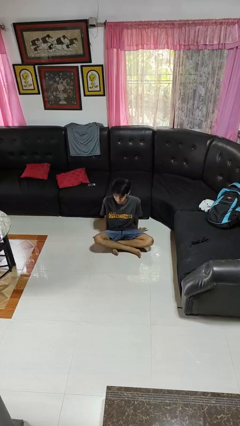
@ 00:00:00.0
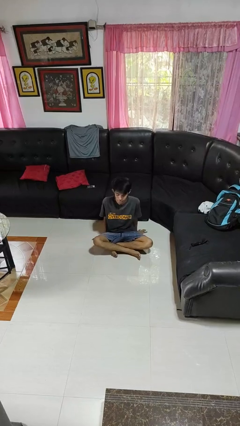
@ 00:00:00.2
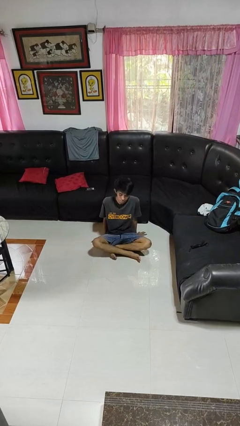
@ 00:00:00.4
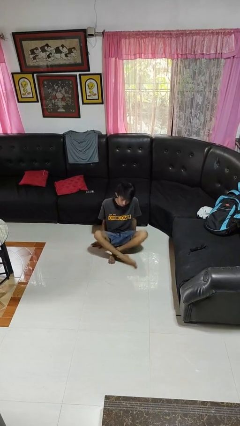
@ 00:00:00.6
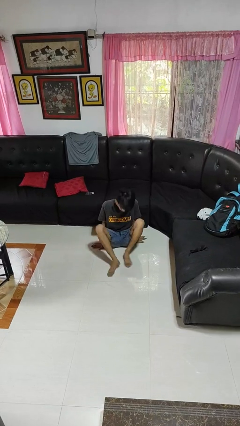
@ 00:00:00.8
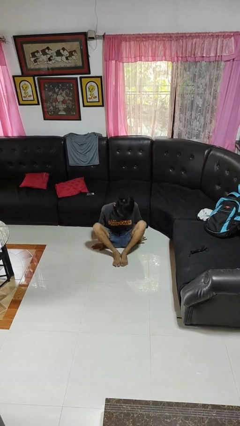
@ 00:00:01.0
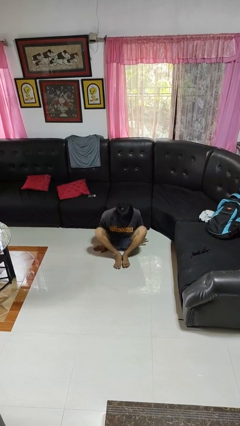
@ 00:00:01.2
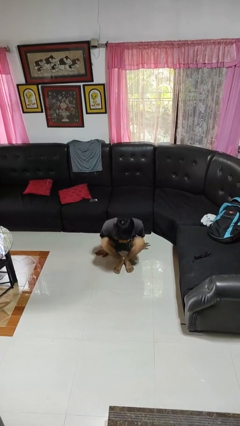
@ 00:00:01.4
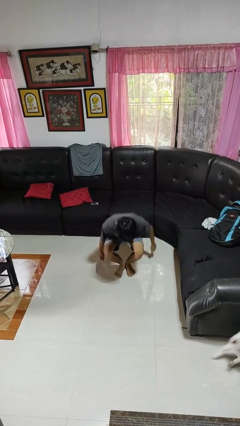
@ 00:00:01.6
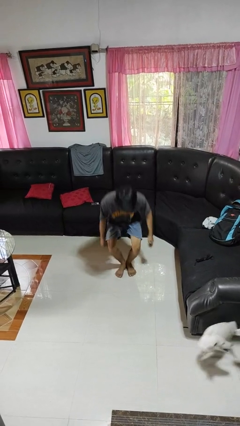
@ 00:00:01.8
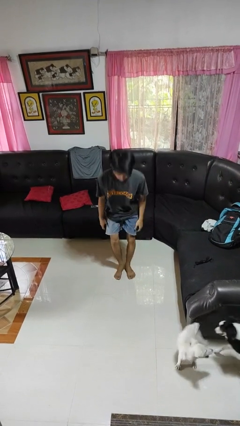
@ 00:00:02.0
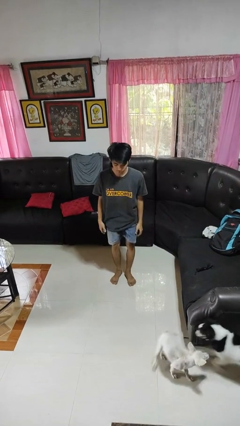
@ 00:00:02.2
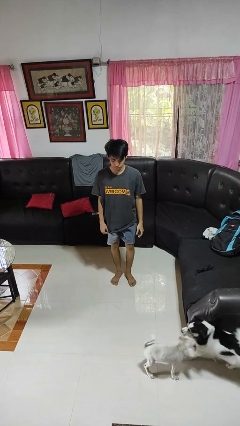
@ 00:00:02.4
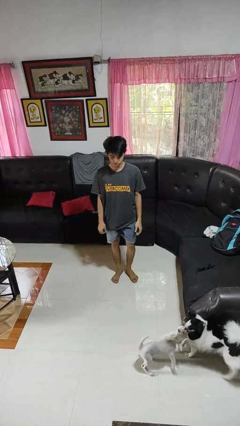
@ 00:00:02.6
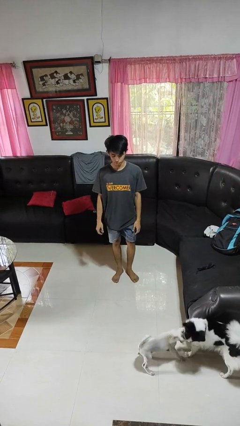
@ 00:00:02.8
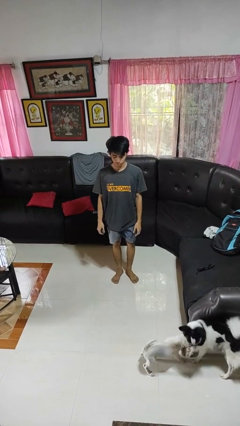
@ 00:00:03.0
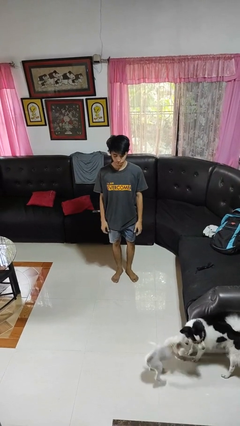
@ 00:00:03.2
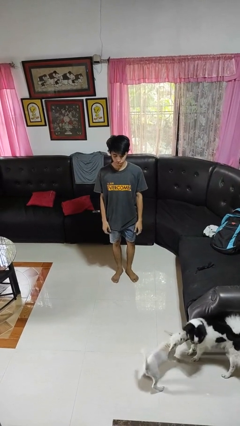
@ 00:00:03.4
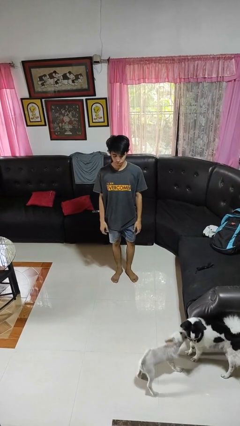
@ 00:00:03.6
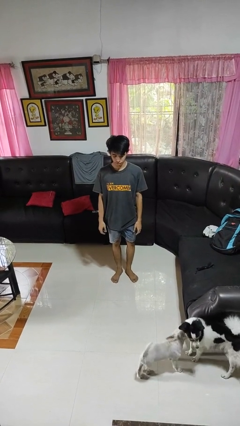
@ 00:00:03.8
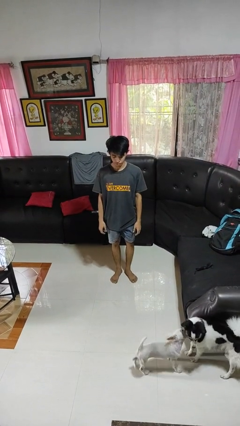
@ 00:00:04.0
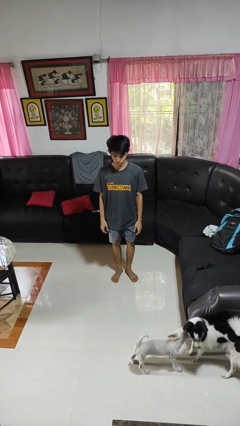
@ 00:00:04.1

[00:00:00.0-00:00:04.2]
person stands up from floor

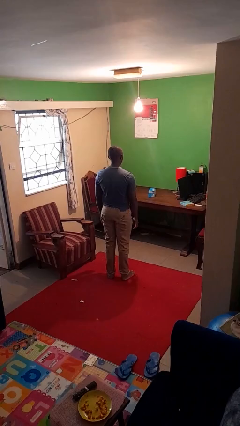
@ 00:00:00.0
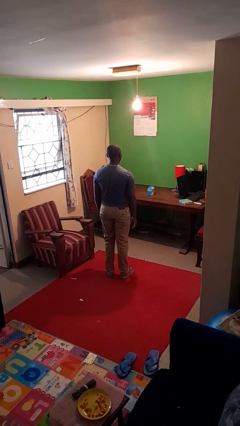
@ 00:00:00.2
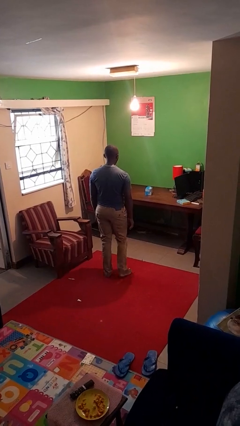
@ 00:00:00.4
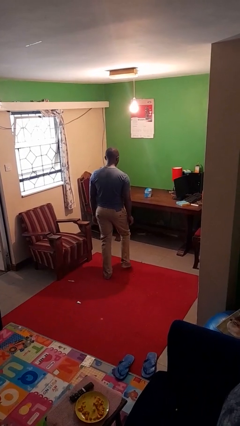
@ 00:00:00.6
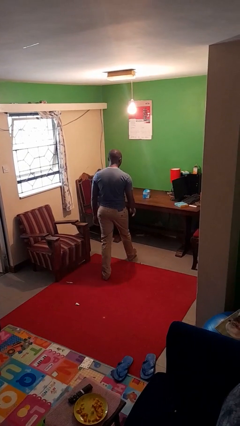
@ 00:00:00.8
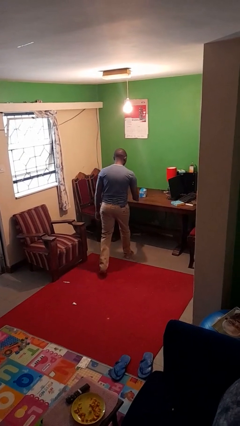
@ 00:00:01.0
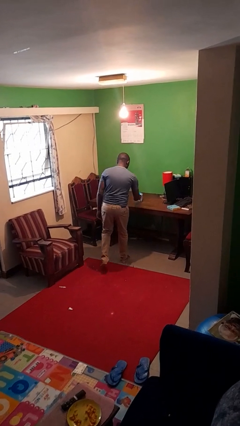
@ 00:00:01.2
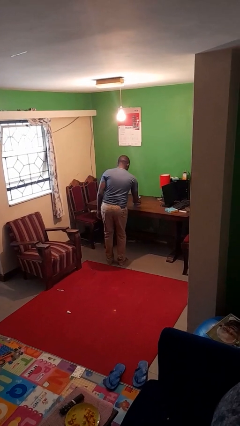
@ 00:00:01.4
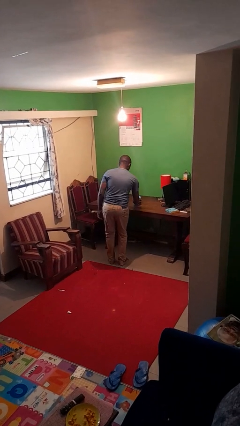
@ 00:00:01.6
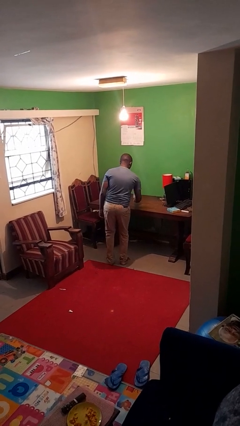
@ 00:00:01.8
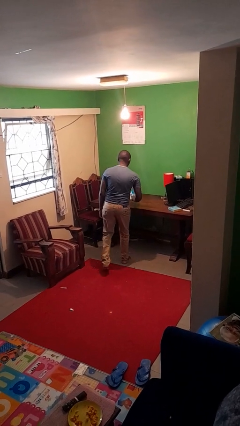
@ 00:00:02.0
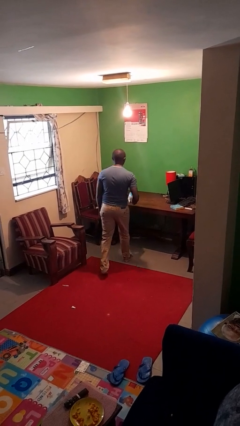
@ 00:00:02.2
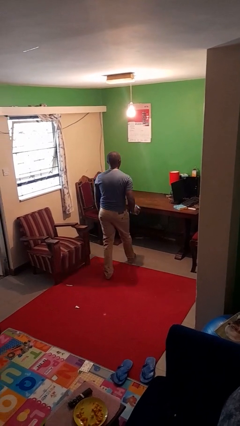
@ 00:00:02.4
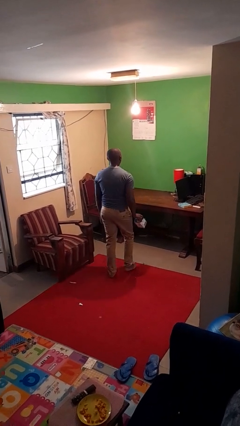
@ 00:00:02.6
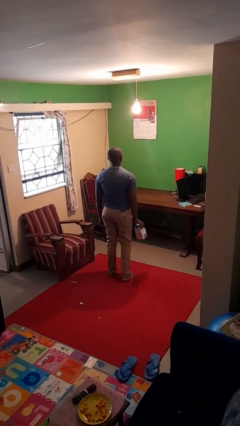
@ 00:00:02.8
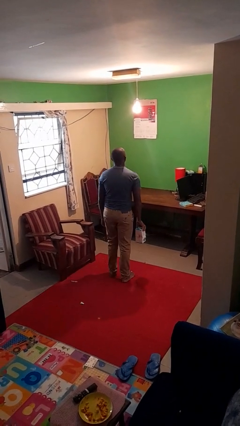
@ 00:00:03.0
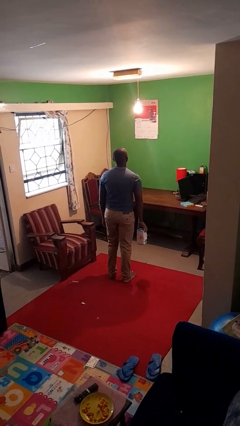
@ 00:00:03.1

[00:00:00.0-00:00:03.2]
person picks up object from table

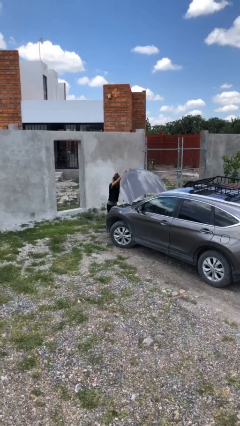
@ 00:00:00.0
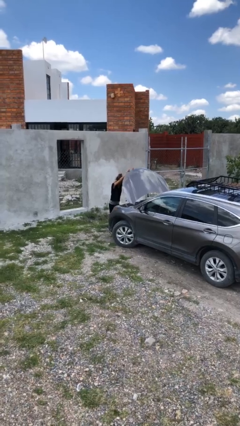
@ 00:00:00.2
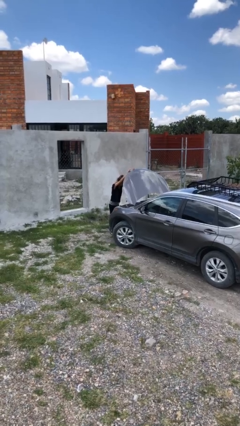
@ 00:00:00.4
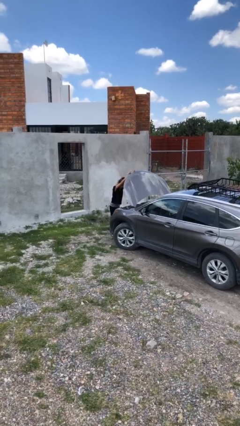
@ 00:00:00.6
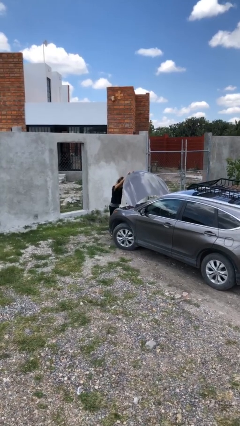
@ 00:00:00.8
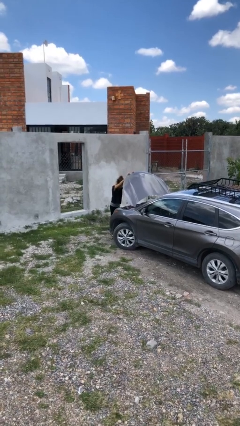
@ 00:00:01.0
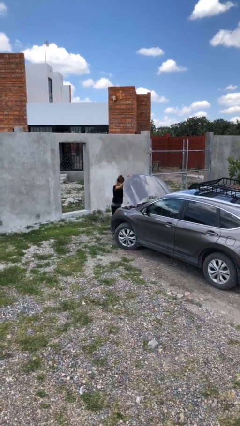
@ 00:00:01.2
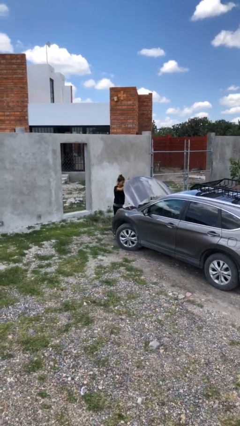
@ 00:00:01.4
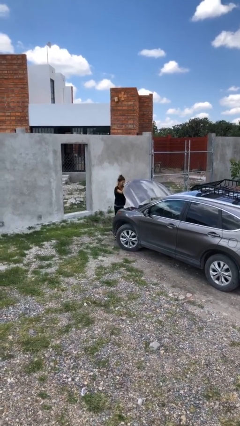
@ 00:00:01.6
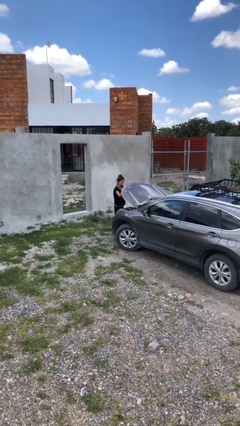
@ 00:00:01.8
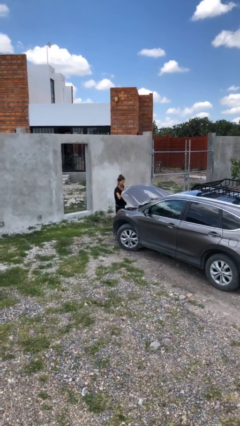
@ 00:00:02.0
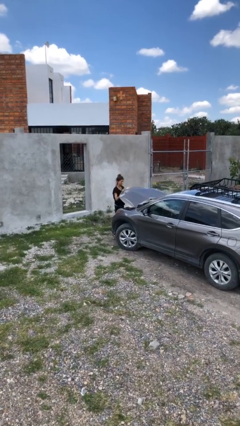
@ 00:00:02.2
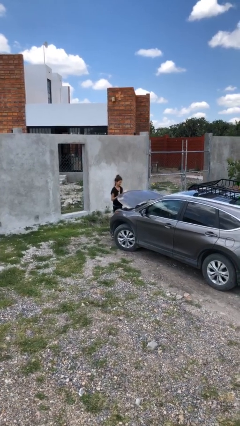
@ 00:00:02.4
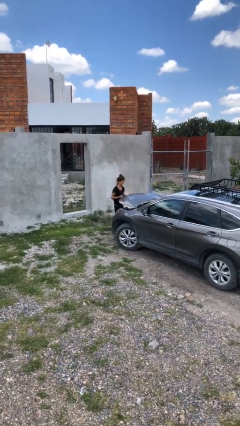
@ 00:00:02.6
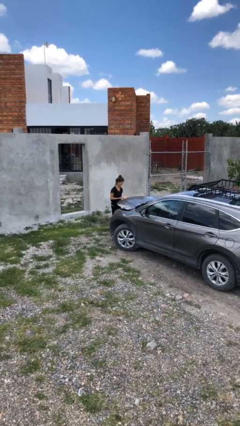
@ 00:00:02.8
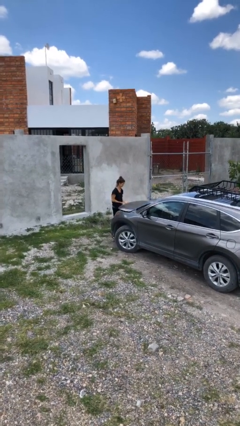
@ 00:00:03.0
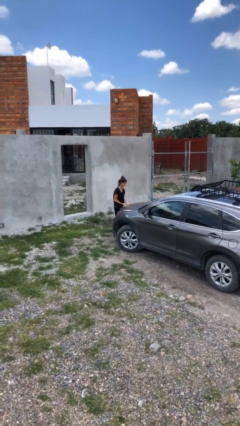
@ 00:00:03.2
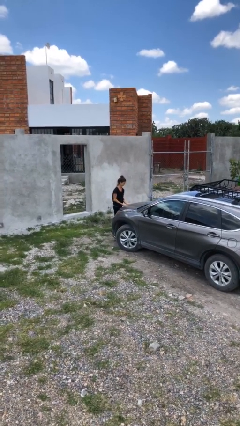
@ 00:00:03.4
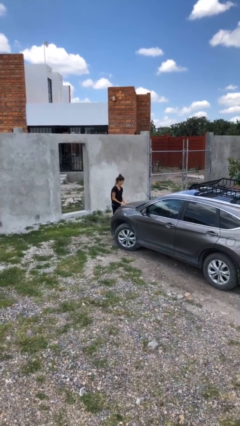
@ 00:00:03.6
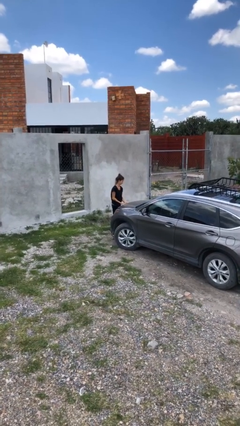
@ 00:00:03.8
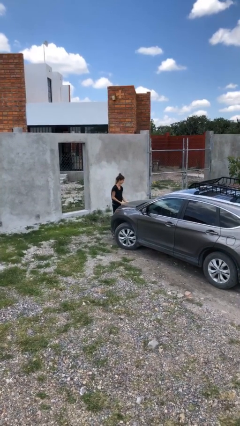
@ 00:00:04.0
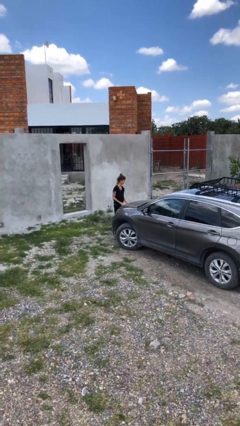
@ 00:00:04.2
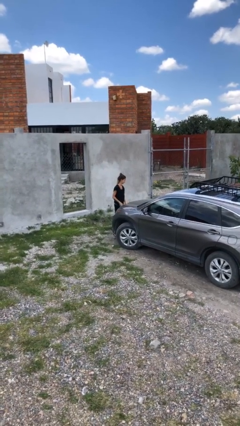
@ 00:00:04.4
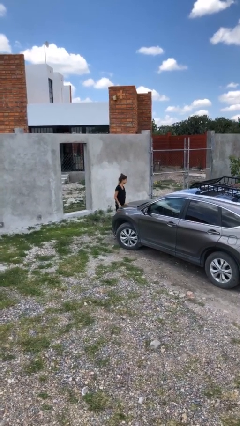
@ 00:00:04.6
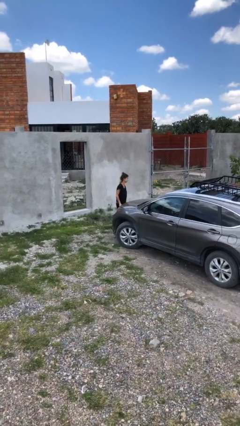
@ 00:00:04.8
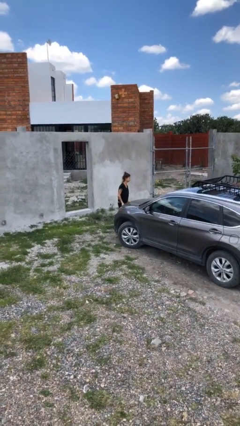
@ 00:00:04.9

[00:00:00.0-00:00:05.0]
person closes car hood

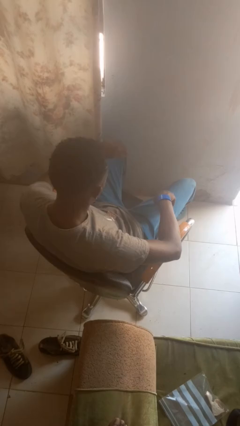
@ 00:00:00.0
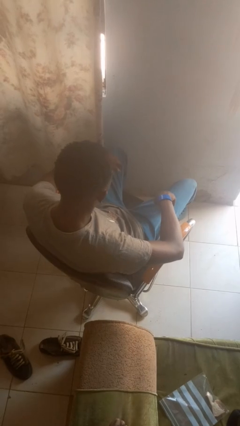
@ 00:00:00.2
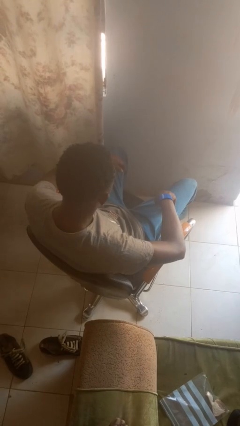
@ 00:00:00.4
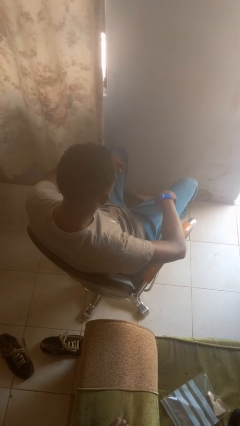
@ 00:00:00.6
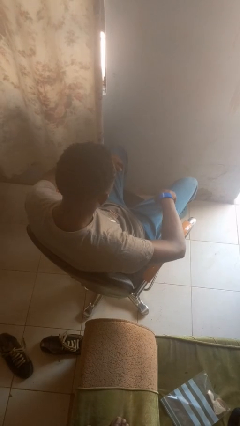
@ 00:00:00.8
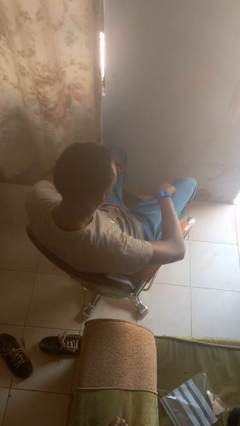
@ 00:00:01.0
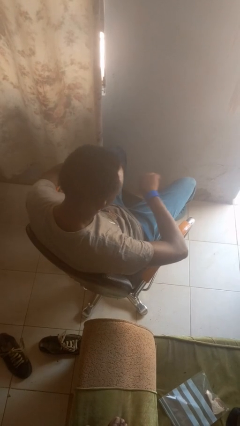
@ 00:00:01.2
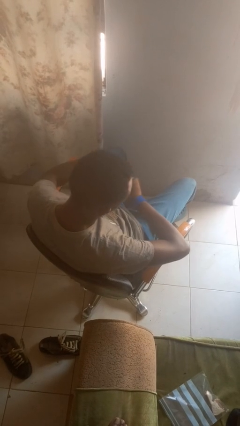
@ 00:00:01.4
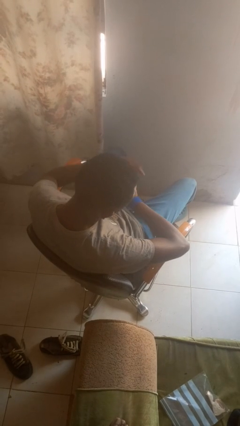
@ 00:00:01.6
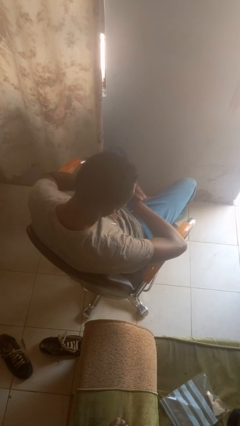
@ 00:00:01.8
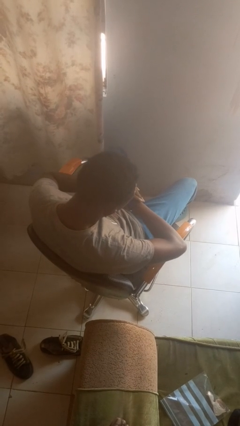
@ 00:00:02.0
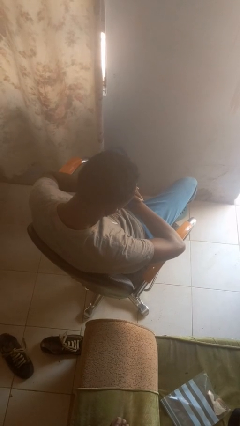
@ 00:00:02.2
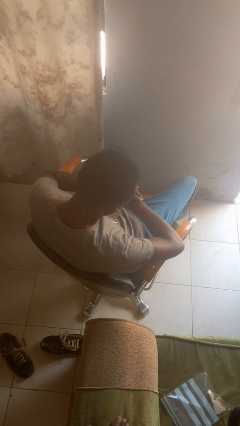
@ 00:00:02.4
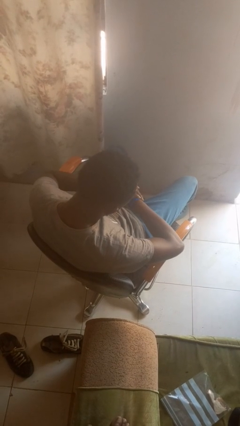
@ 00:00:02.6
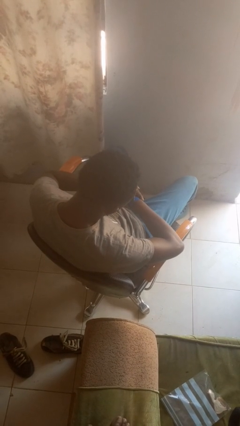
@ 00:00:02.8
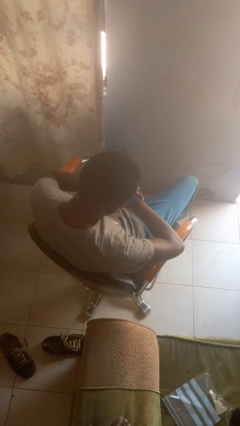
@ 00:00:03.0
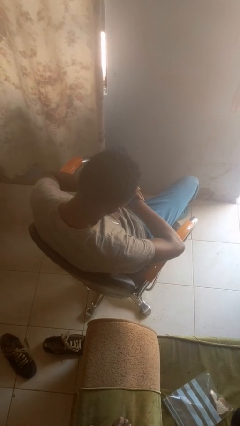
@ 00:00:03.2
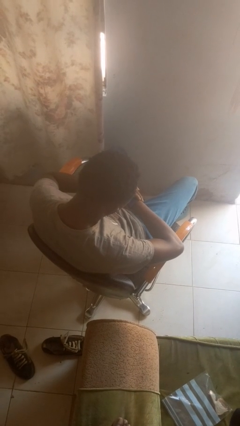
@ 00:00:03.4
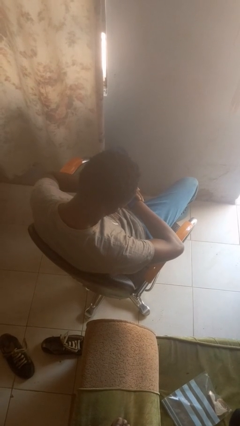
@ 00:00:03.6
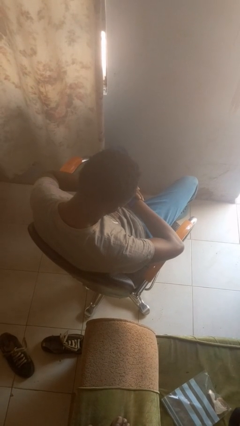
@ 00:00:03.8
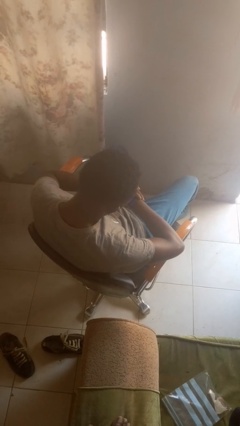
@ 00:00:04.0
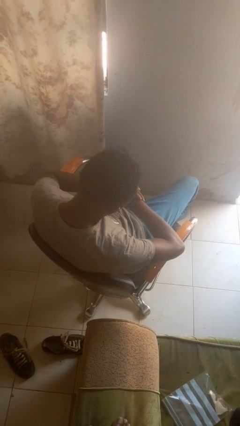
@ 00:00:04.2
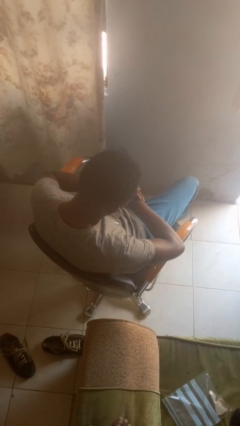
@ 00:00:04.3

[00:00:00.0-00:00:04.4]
person looks at wristwatch

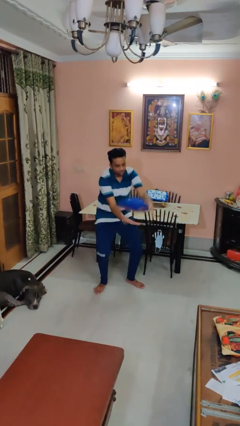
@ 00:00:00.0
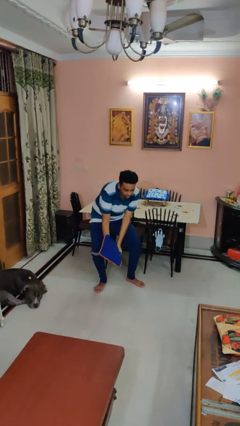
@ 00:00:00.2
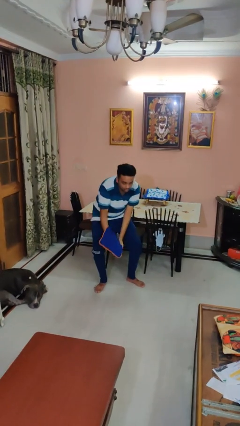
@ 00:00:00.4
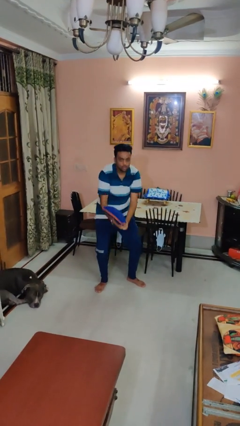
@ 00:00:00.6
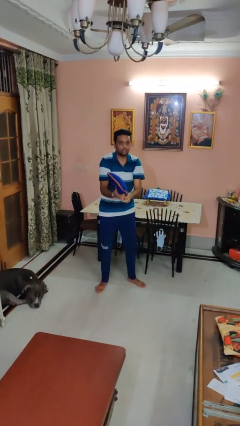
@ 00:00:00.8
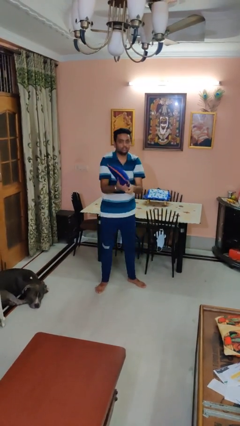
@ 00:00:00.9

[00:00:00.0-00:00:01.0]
person catches dropped object
